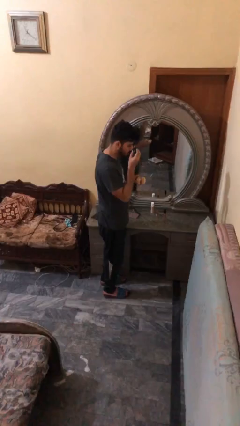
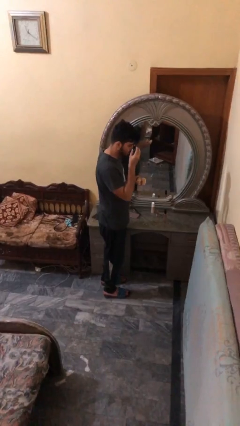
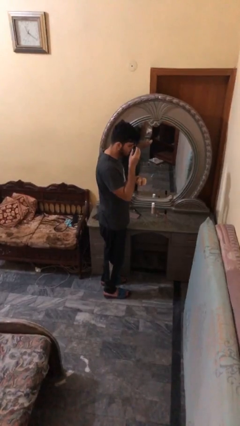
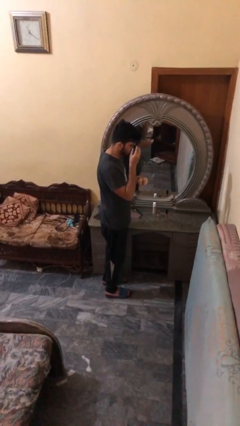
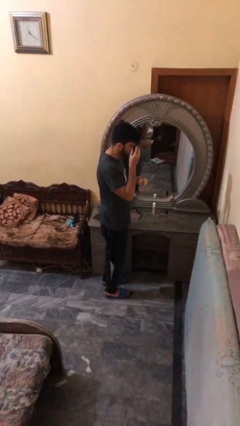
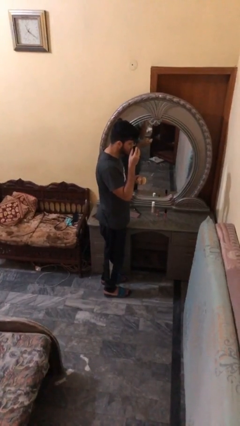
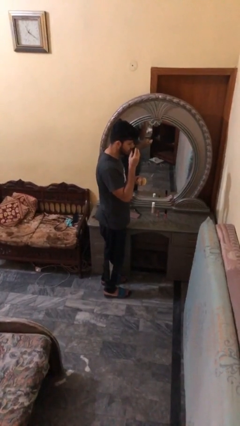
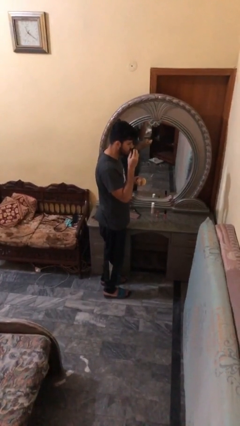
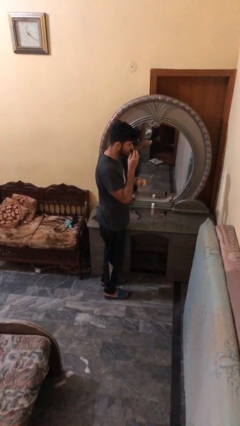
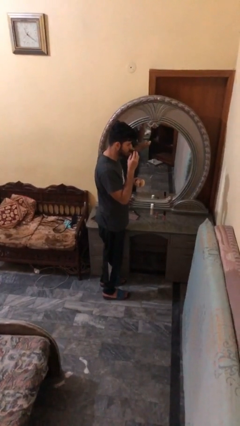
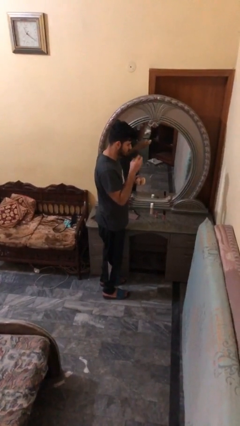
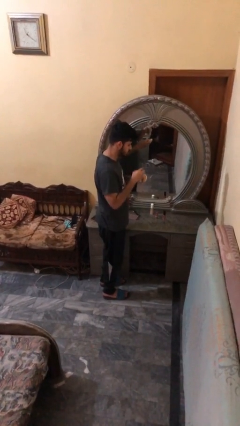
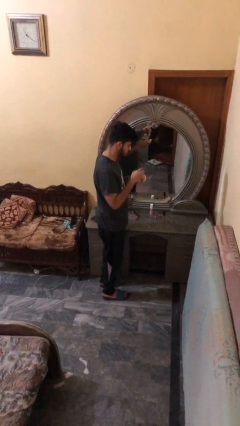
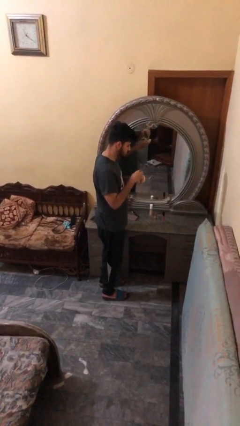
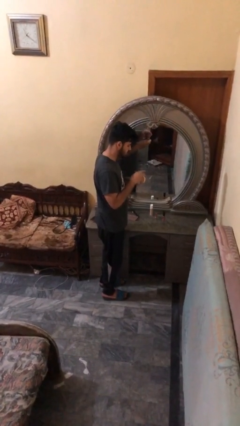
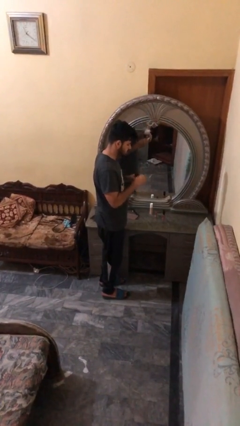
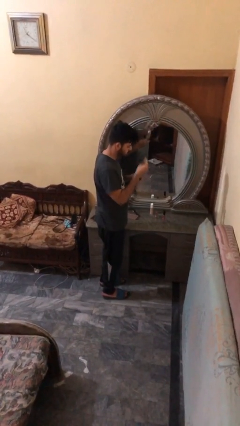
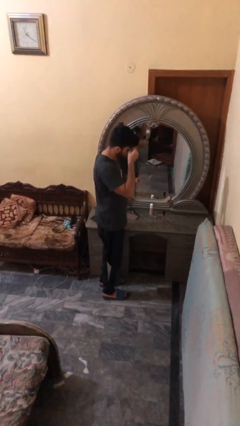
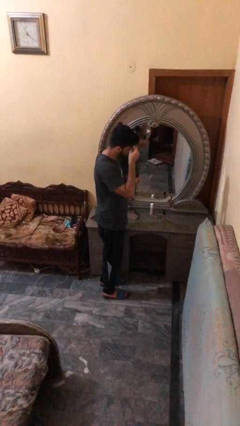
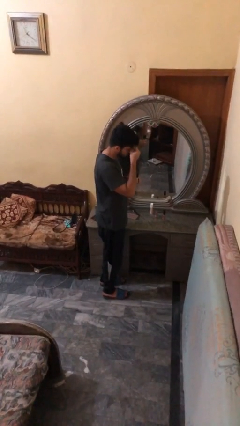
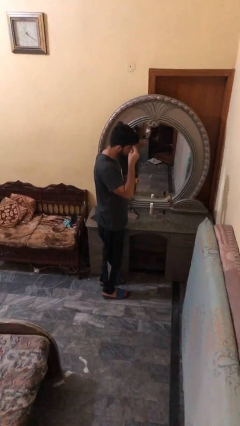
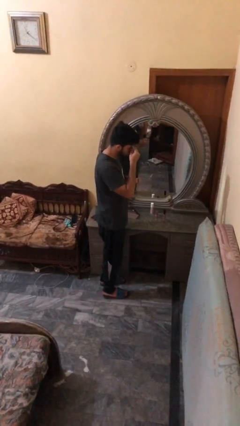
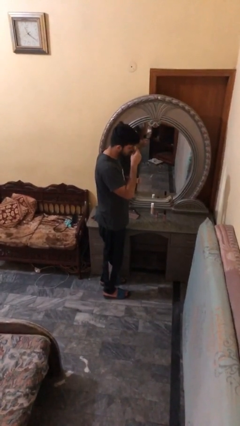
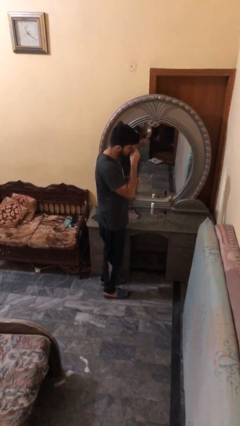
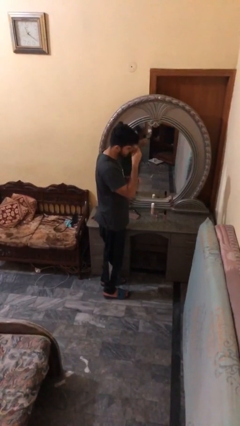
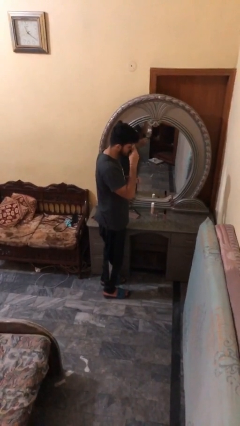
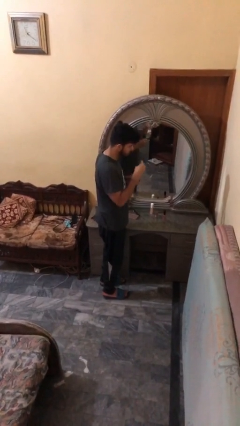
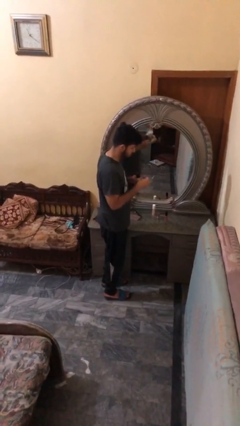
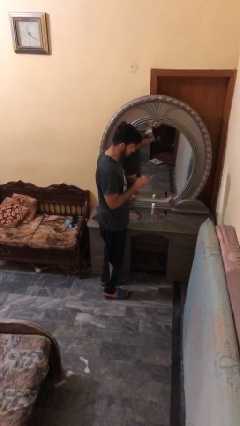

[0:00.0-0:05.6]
person applies foundation makeup

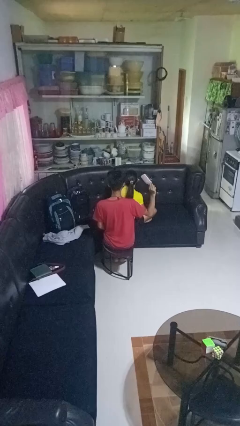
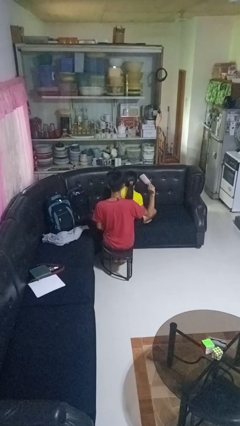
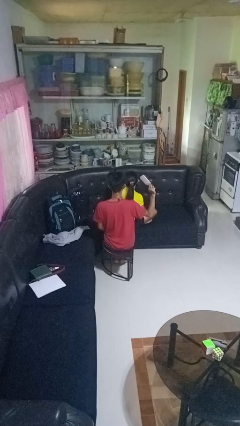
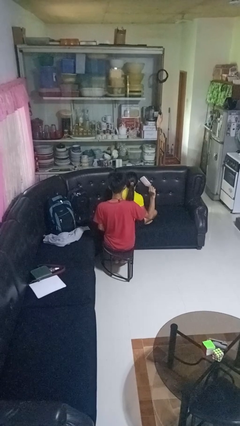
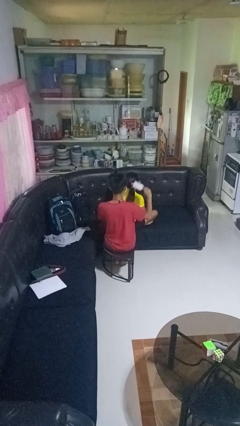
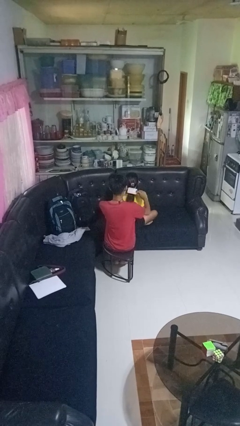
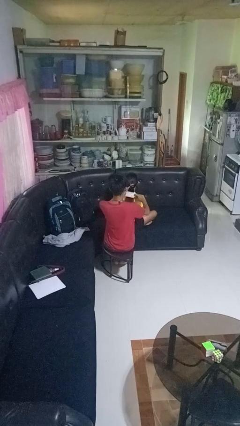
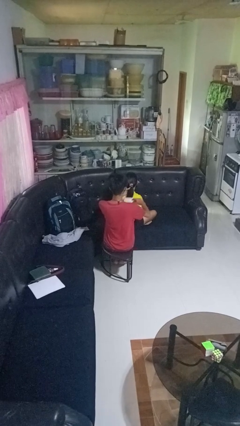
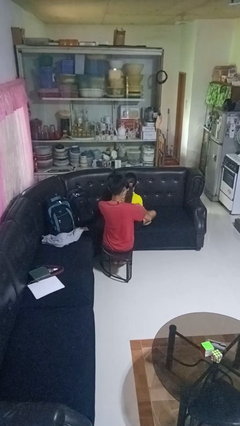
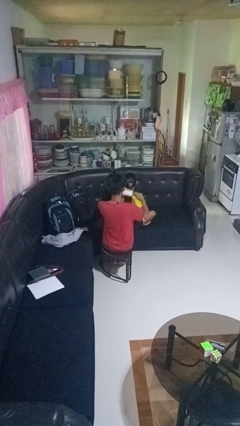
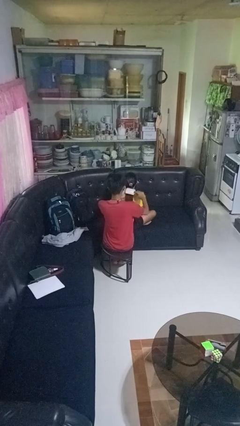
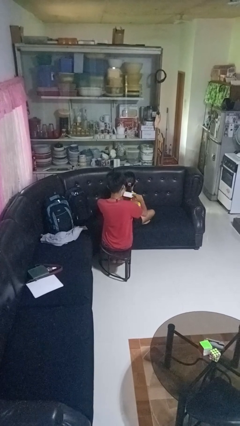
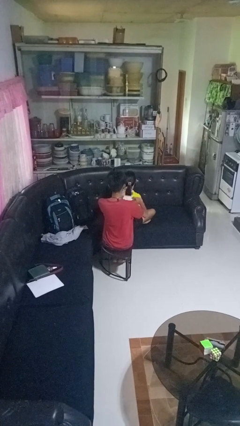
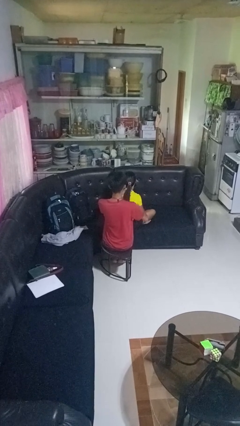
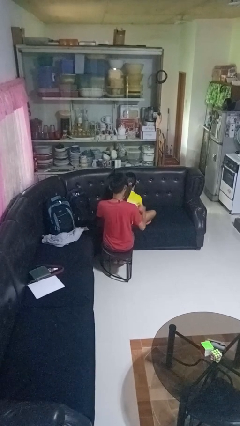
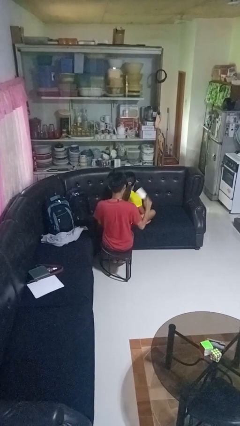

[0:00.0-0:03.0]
person brushes hair of person

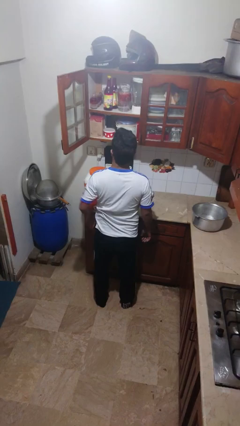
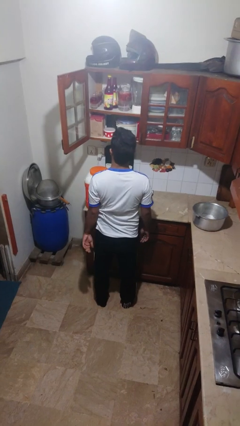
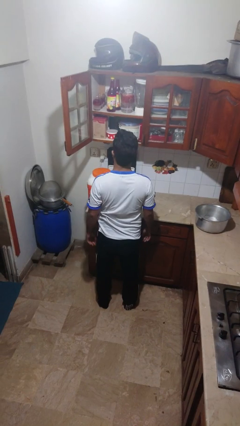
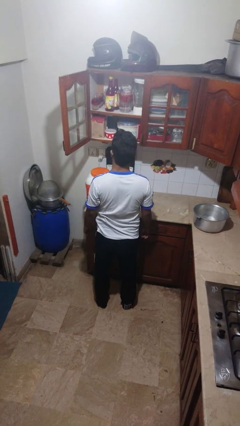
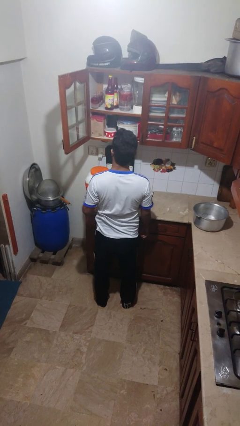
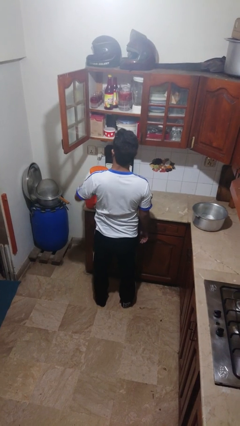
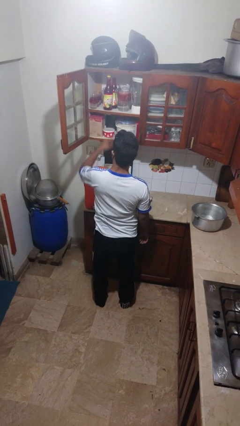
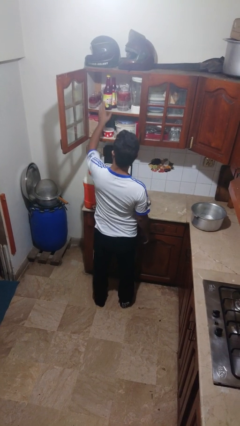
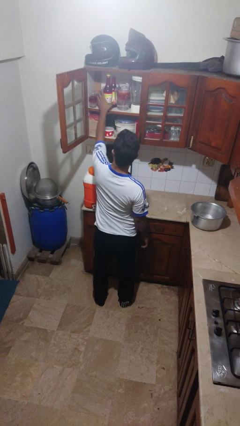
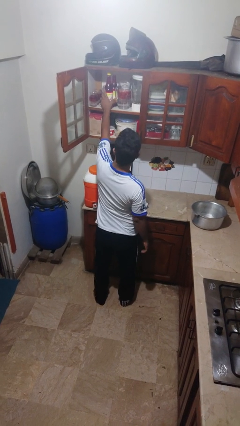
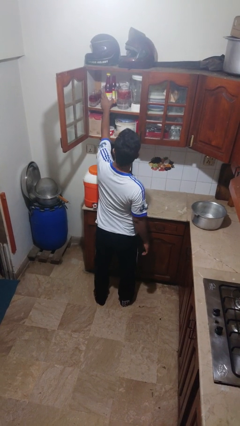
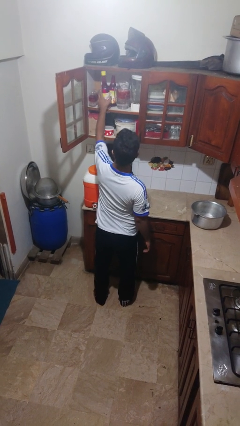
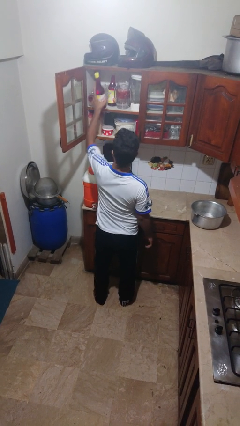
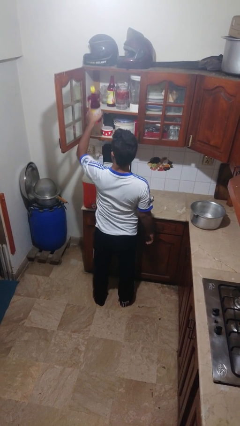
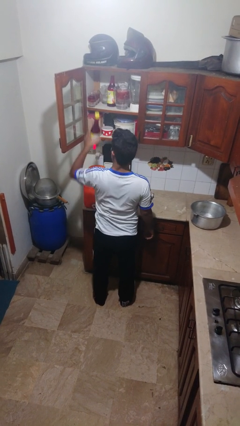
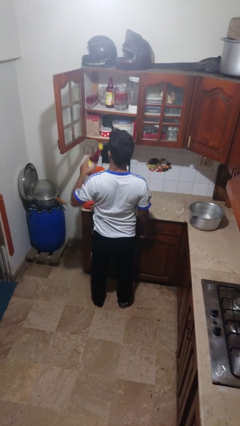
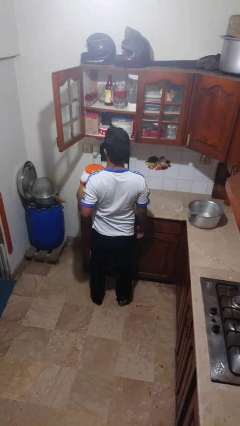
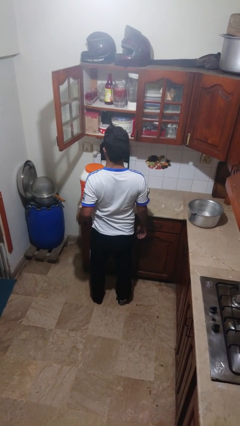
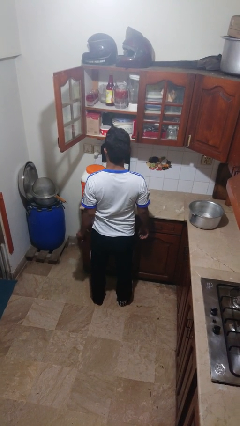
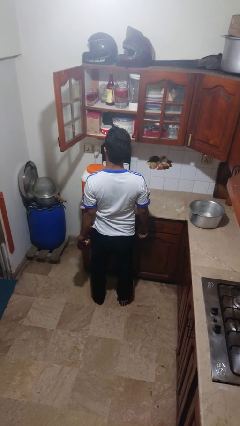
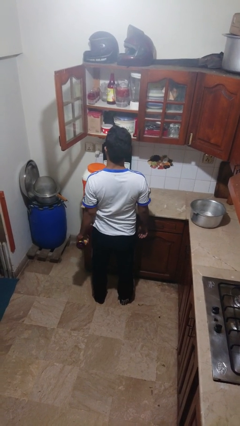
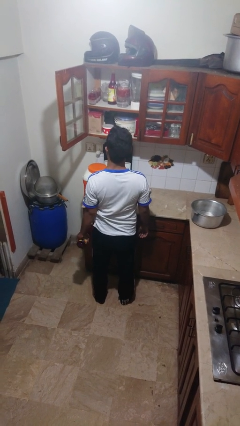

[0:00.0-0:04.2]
person picks up object from cabinet

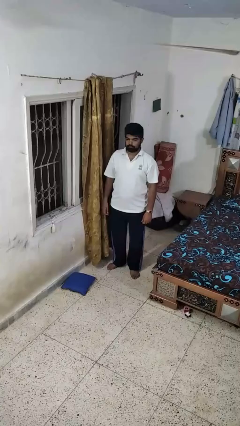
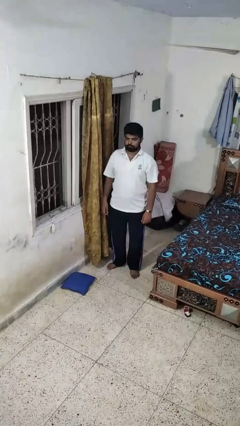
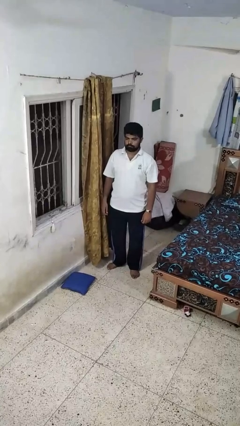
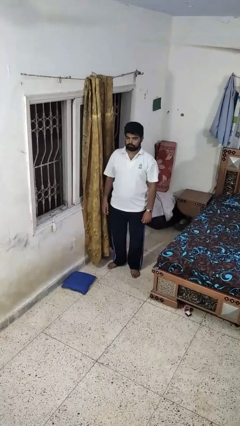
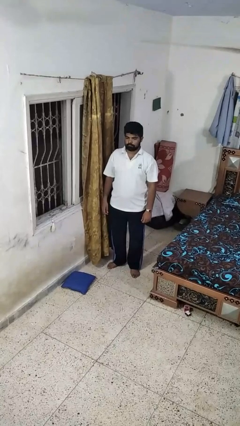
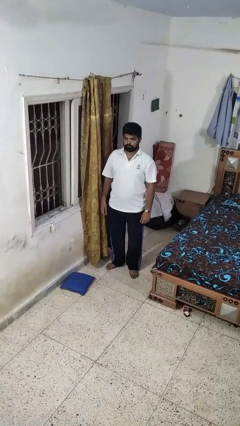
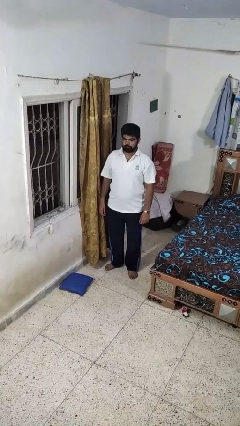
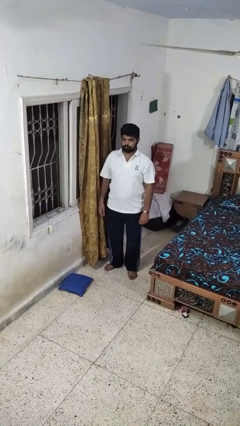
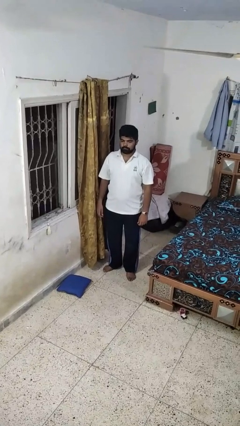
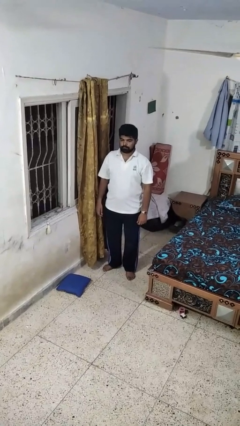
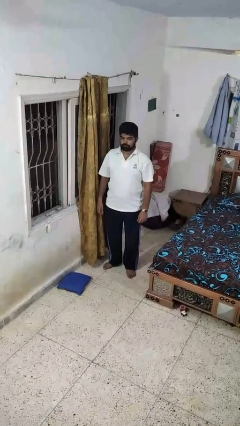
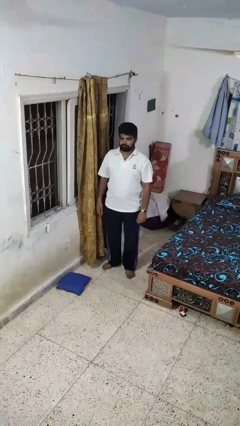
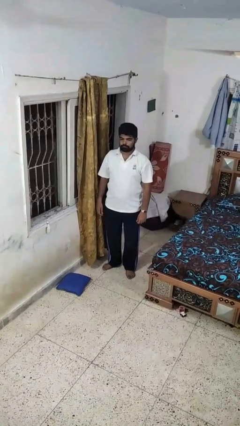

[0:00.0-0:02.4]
person sits crisscross

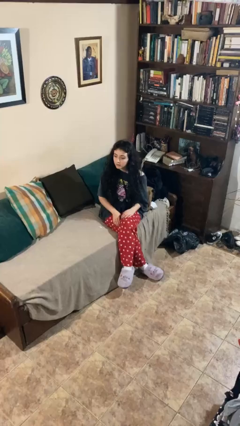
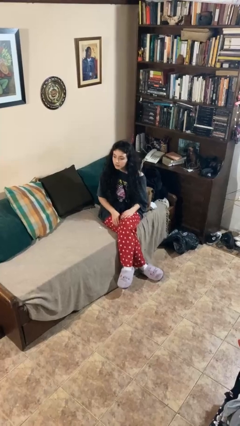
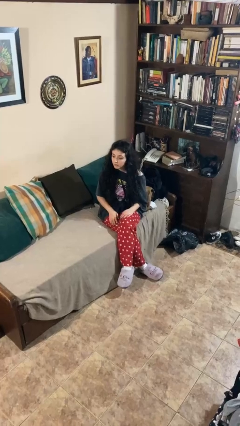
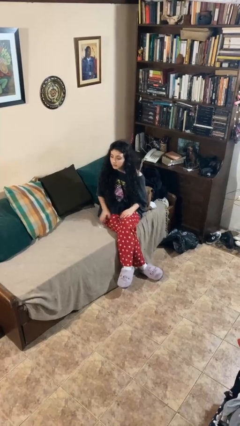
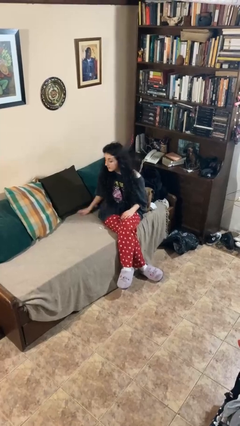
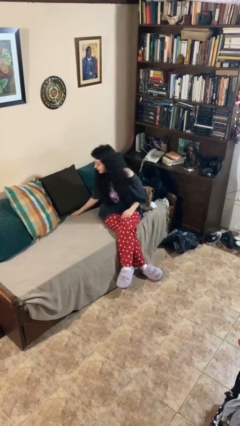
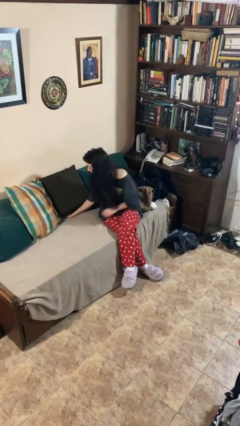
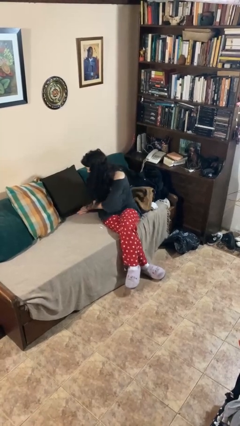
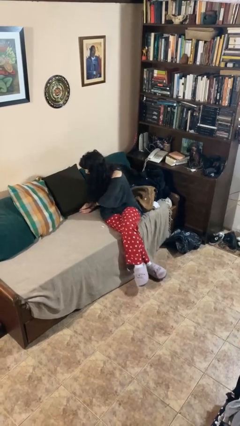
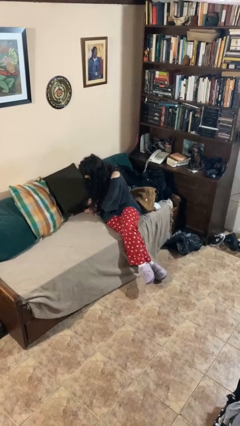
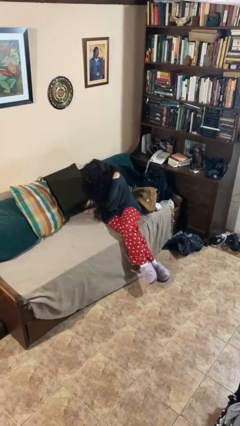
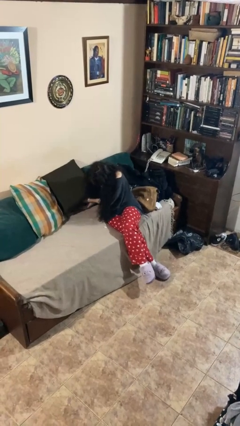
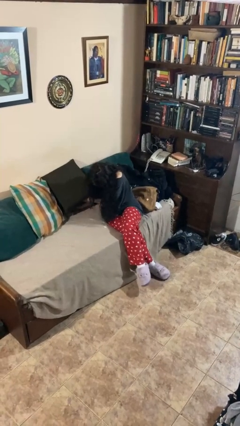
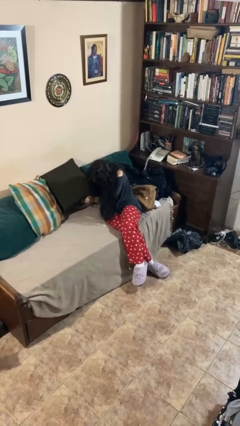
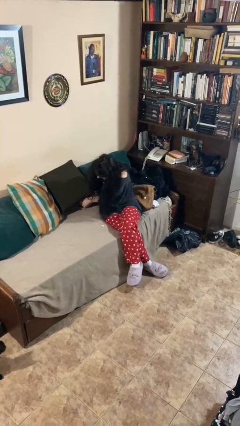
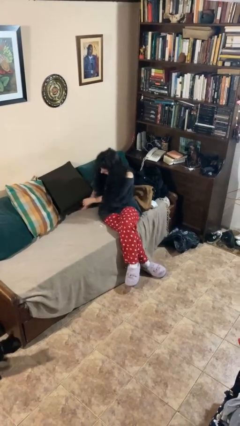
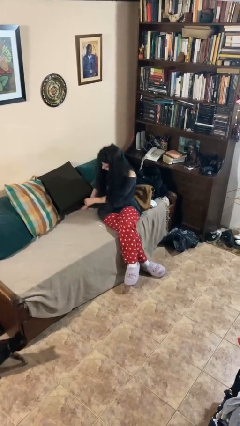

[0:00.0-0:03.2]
person searches in couch
